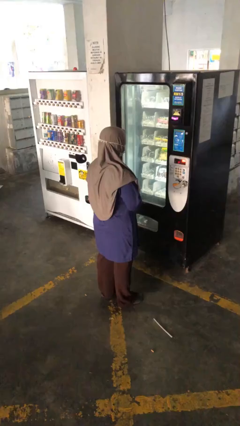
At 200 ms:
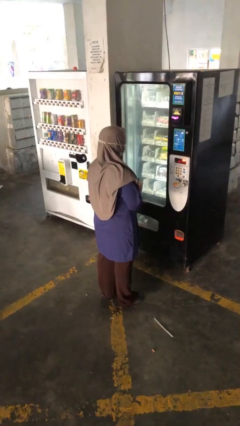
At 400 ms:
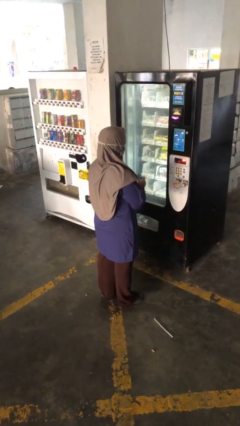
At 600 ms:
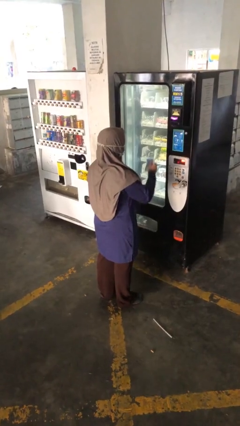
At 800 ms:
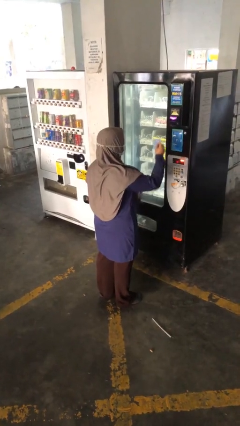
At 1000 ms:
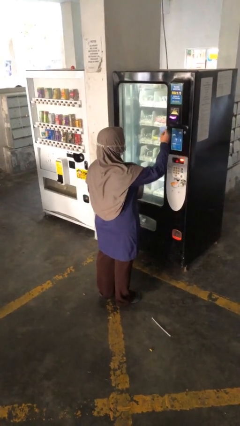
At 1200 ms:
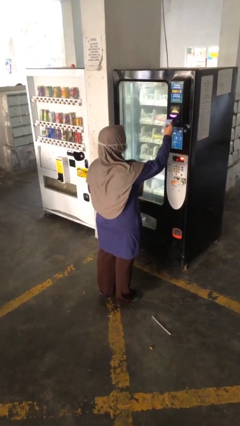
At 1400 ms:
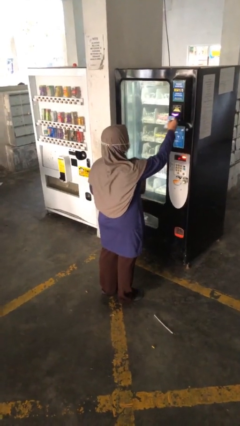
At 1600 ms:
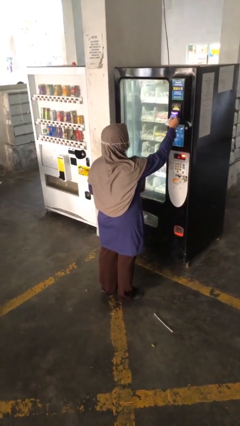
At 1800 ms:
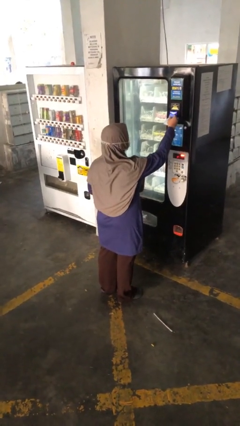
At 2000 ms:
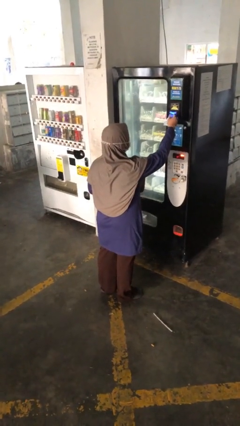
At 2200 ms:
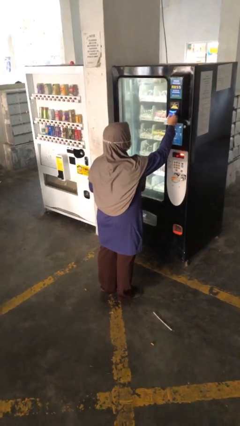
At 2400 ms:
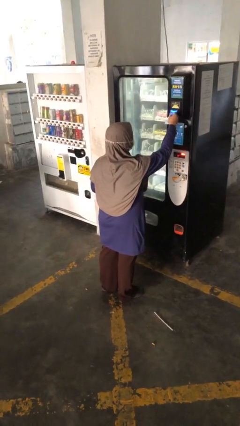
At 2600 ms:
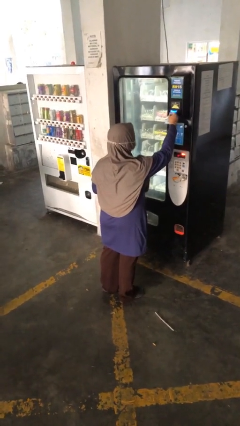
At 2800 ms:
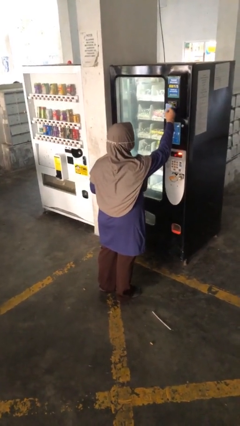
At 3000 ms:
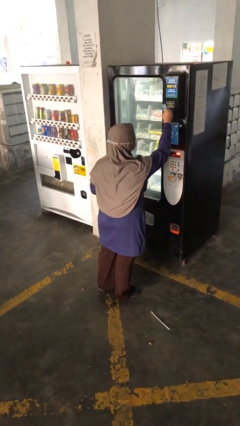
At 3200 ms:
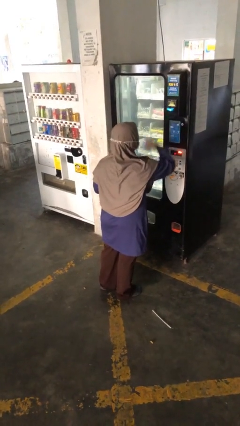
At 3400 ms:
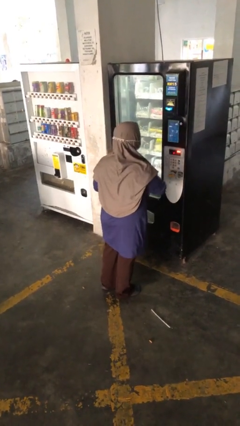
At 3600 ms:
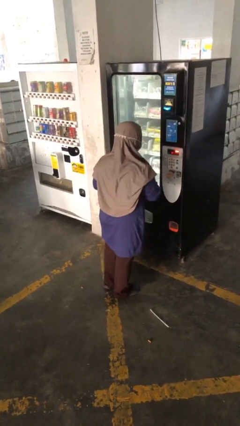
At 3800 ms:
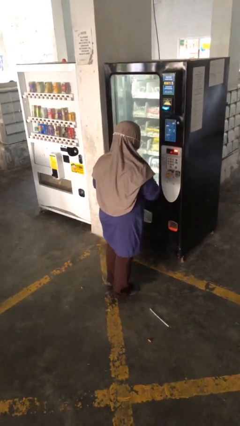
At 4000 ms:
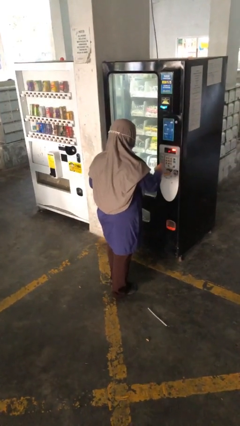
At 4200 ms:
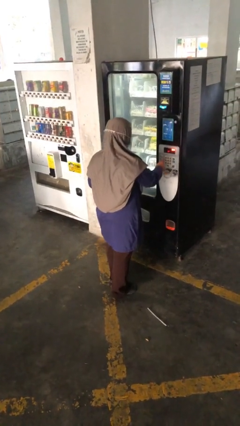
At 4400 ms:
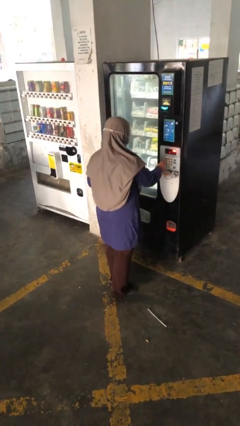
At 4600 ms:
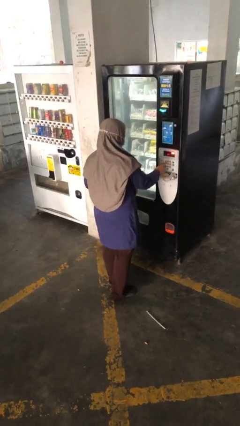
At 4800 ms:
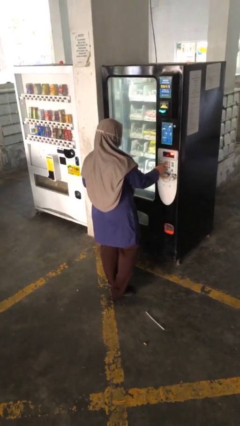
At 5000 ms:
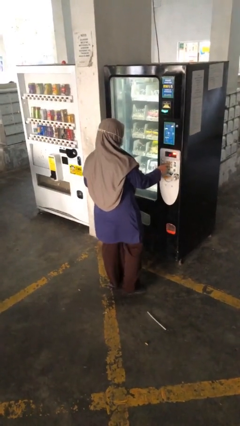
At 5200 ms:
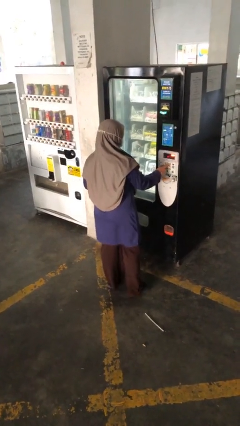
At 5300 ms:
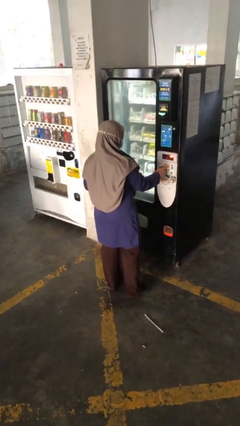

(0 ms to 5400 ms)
person purchases from machine

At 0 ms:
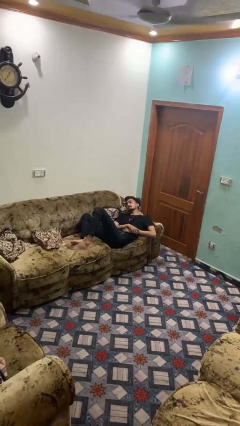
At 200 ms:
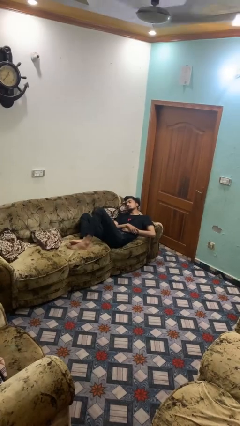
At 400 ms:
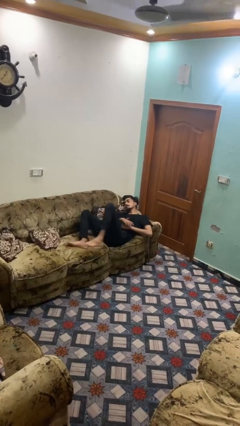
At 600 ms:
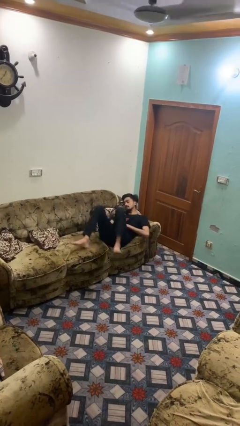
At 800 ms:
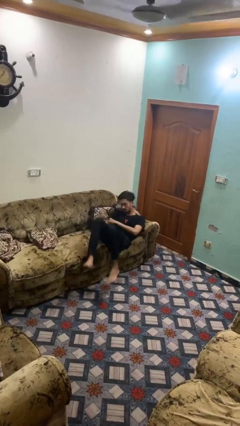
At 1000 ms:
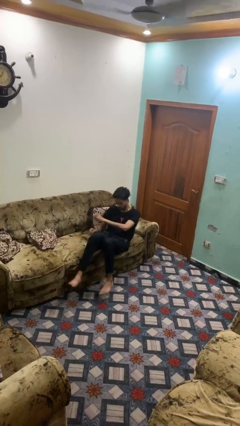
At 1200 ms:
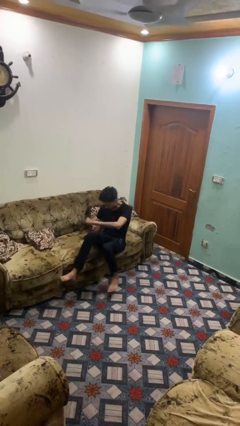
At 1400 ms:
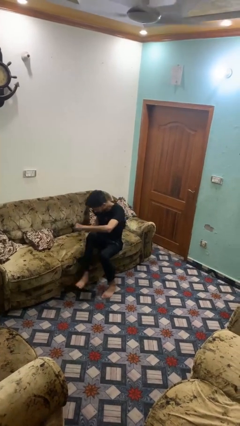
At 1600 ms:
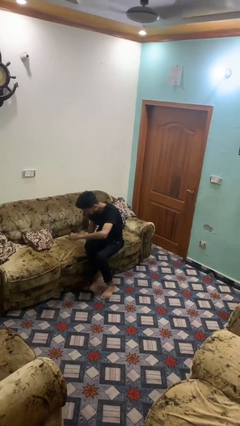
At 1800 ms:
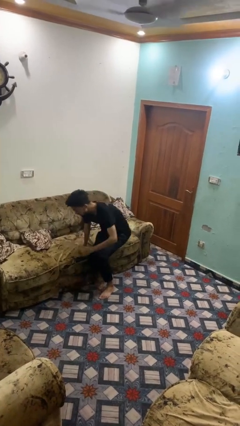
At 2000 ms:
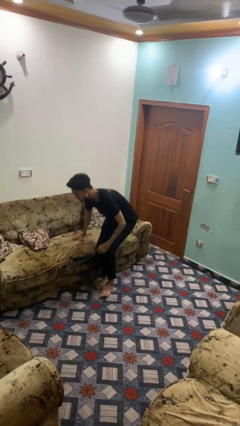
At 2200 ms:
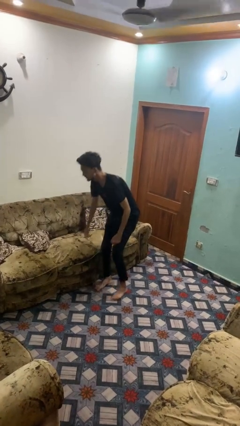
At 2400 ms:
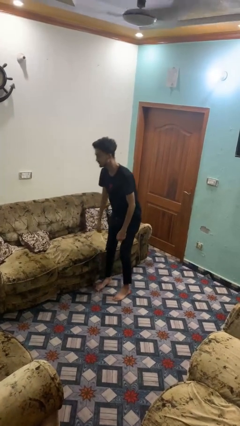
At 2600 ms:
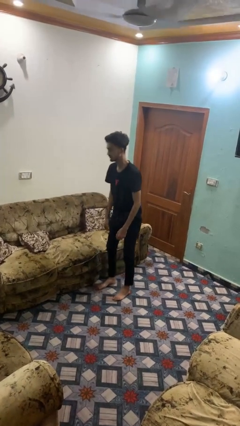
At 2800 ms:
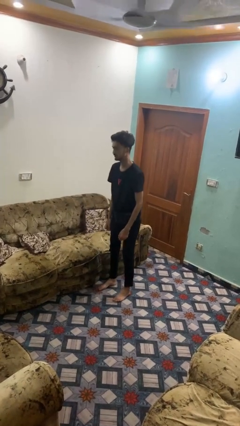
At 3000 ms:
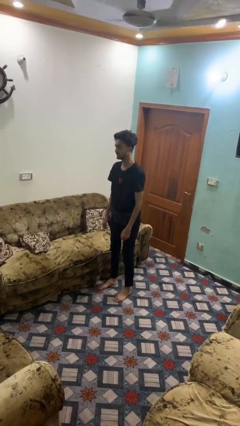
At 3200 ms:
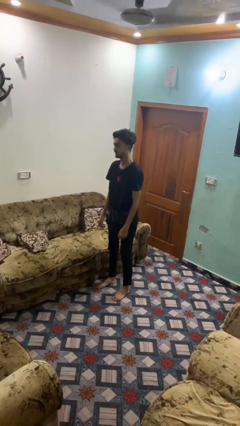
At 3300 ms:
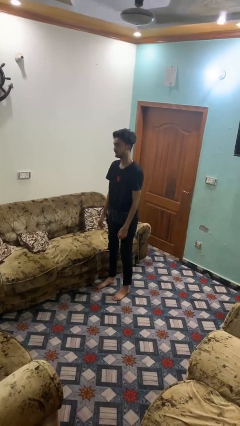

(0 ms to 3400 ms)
person stands up

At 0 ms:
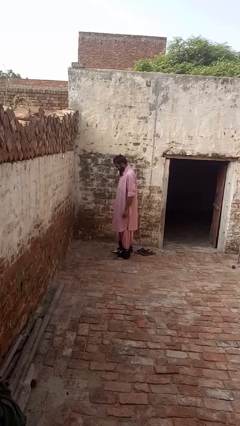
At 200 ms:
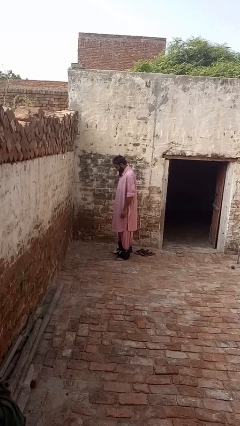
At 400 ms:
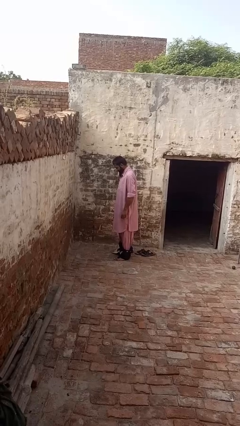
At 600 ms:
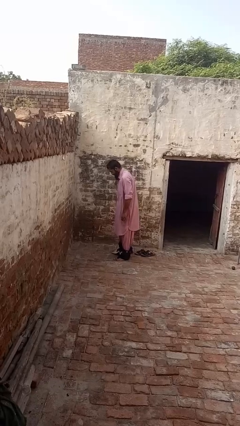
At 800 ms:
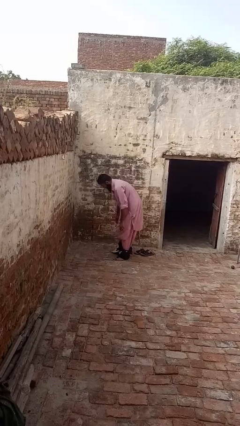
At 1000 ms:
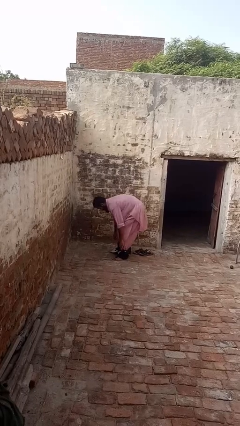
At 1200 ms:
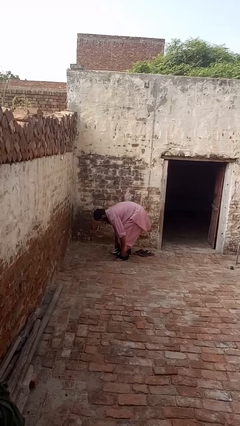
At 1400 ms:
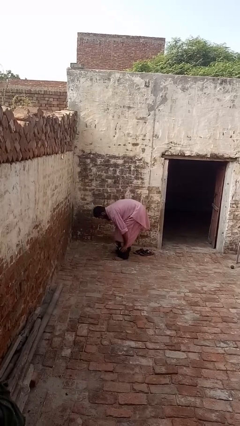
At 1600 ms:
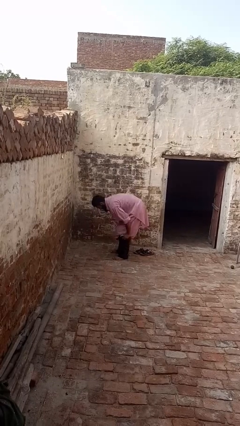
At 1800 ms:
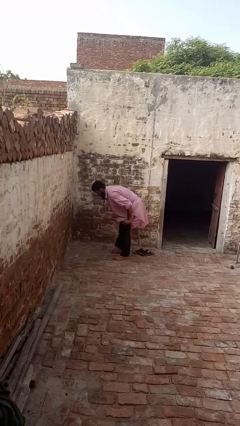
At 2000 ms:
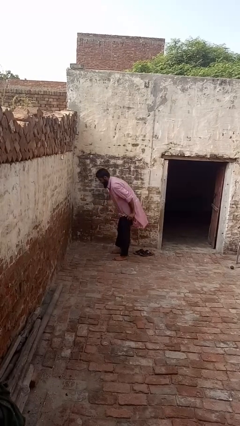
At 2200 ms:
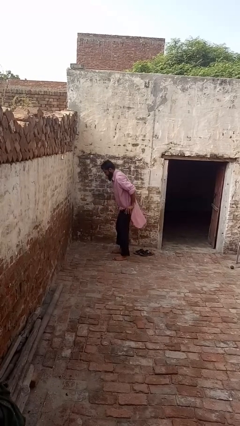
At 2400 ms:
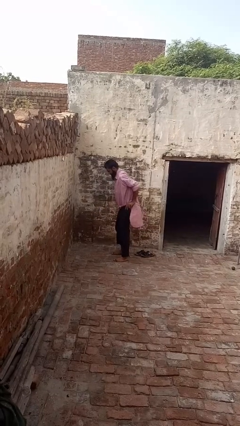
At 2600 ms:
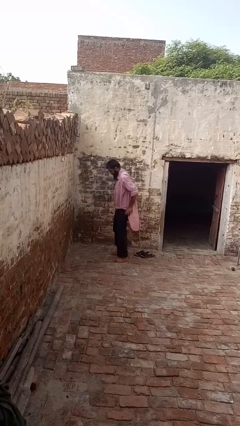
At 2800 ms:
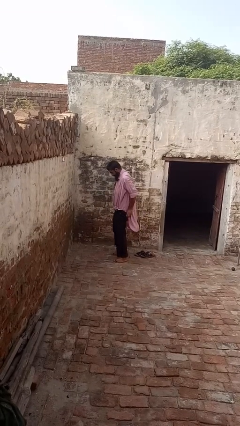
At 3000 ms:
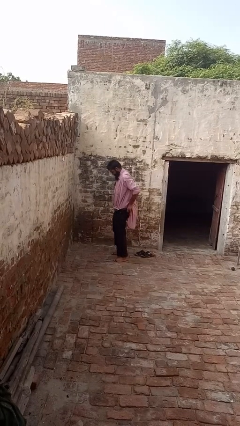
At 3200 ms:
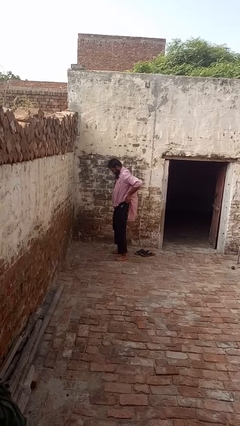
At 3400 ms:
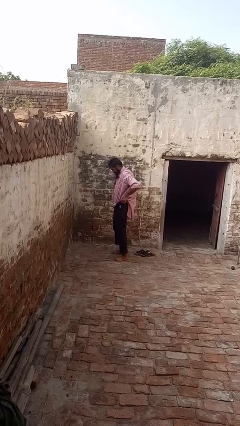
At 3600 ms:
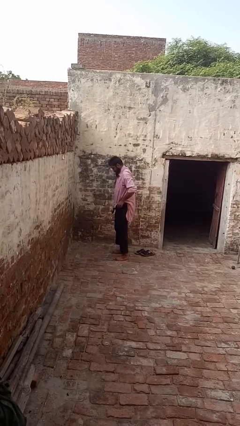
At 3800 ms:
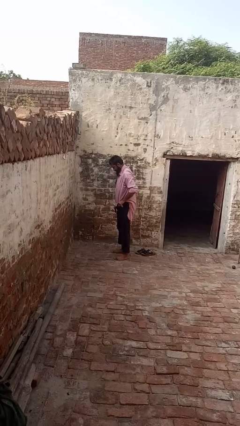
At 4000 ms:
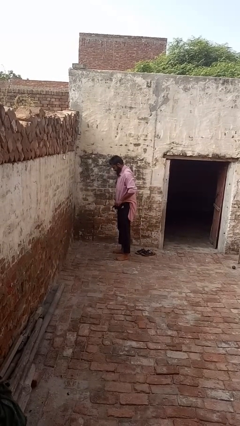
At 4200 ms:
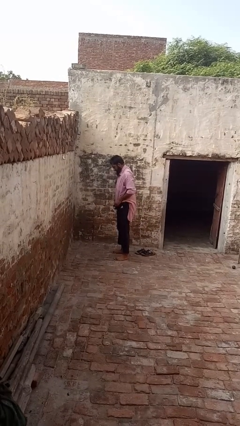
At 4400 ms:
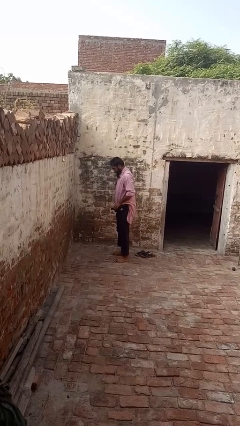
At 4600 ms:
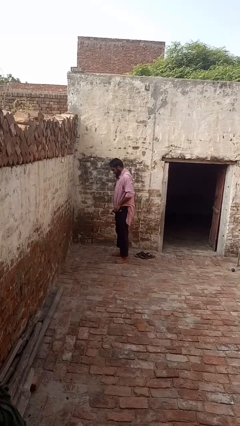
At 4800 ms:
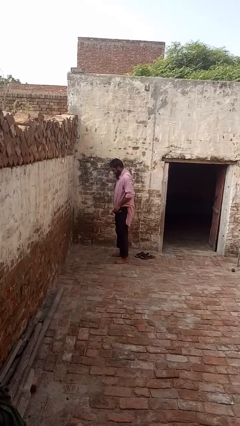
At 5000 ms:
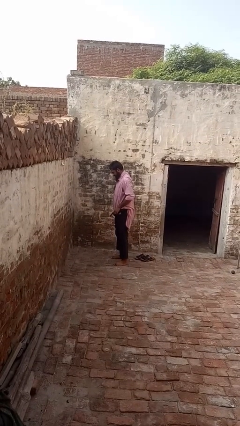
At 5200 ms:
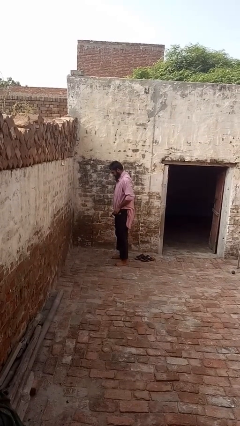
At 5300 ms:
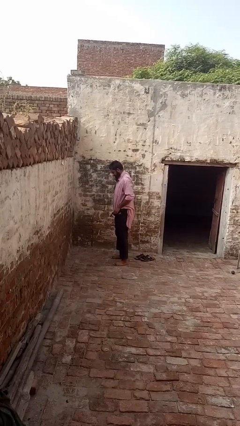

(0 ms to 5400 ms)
person puts on pants

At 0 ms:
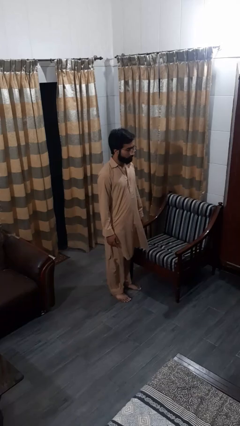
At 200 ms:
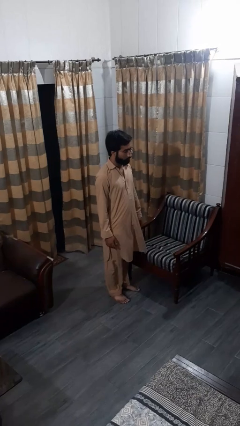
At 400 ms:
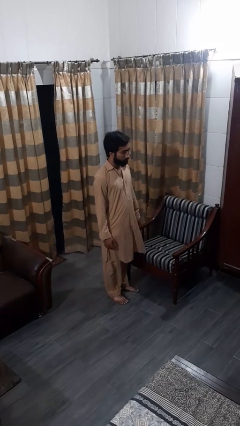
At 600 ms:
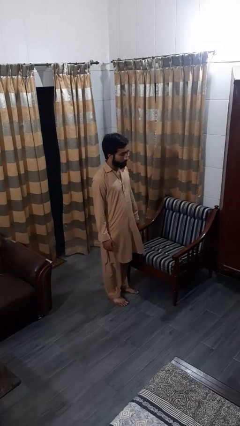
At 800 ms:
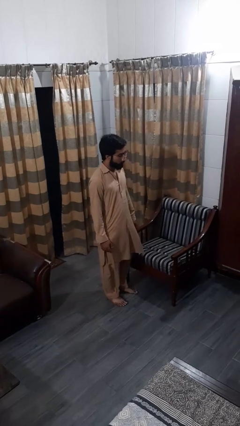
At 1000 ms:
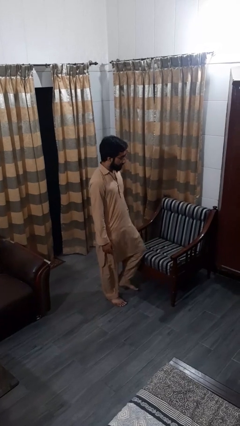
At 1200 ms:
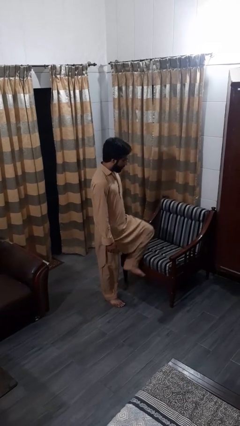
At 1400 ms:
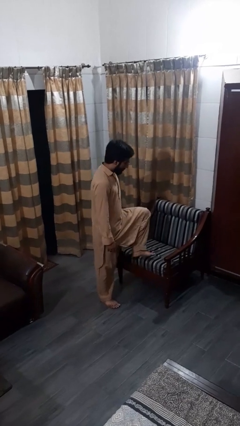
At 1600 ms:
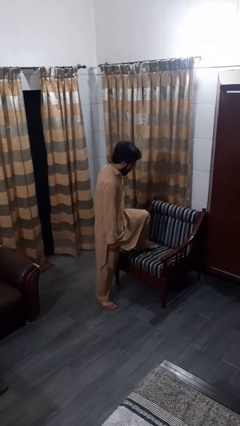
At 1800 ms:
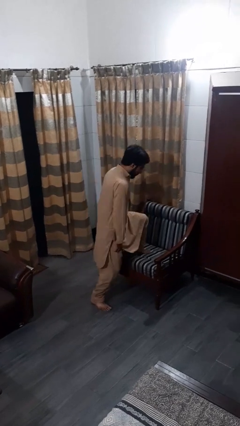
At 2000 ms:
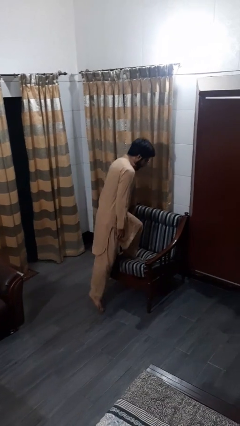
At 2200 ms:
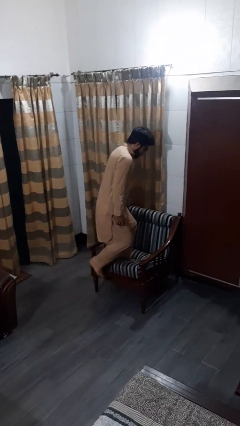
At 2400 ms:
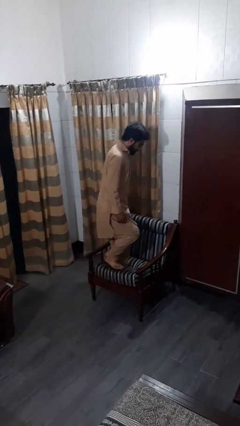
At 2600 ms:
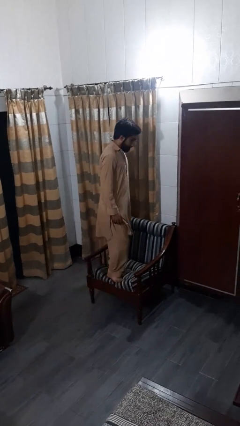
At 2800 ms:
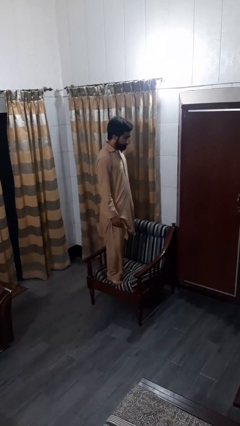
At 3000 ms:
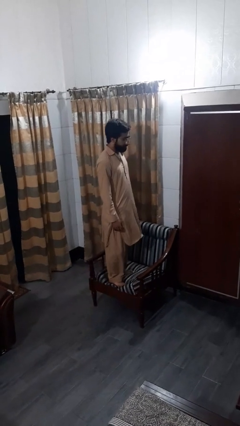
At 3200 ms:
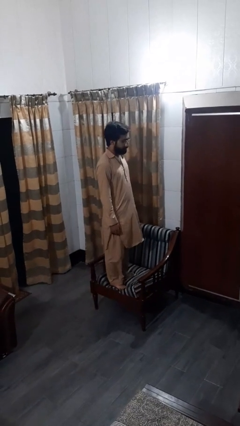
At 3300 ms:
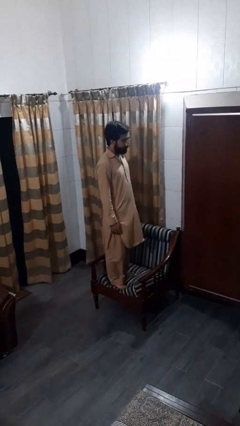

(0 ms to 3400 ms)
person climbs on chair

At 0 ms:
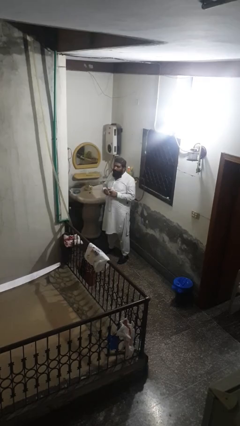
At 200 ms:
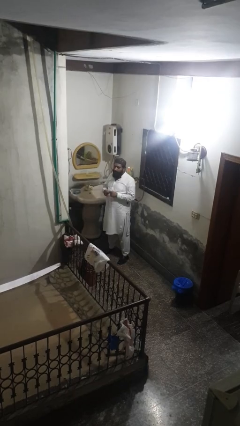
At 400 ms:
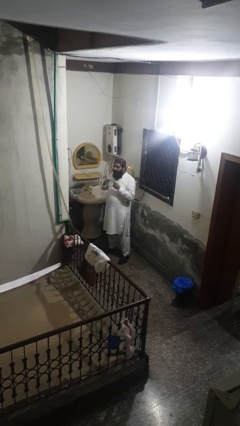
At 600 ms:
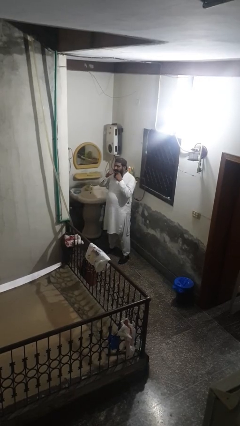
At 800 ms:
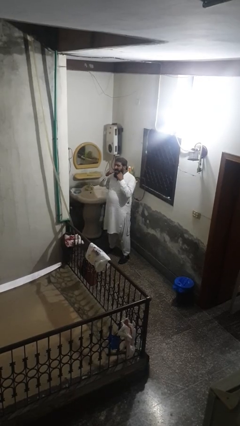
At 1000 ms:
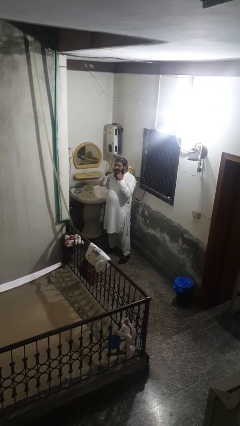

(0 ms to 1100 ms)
person flosses
